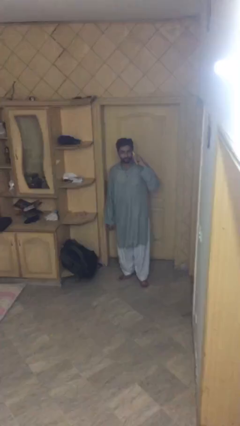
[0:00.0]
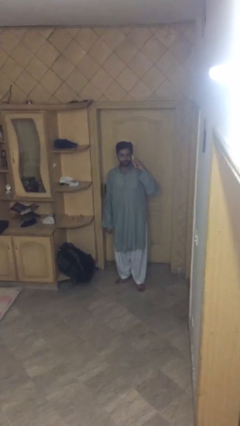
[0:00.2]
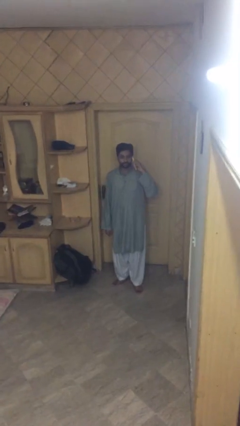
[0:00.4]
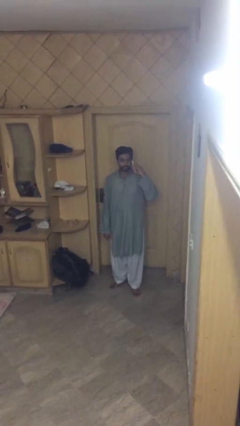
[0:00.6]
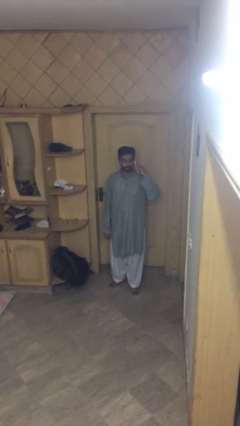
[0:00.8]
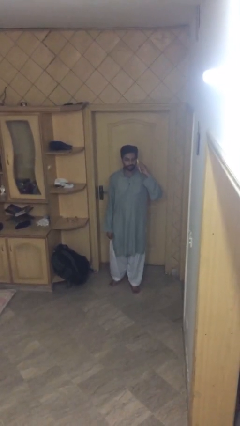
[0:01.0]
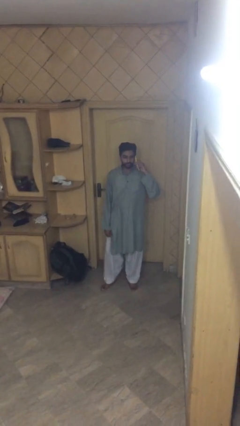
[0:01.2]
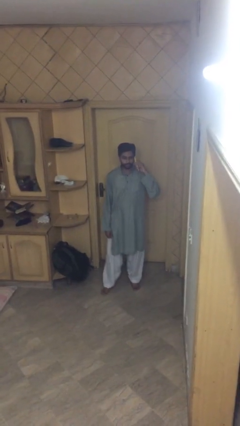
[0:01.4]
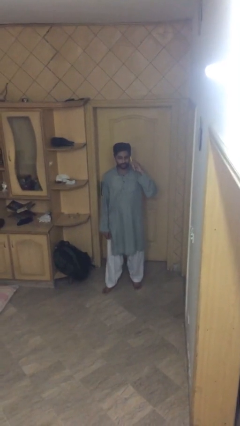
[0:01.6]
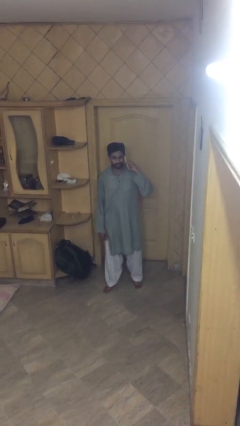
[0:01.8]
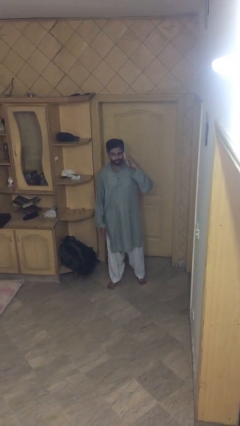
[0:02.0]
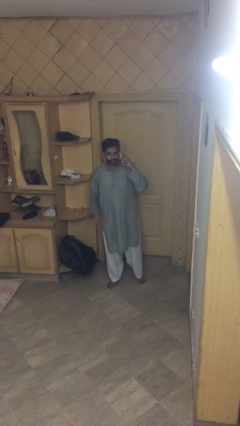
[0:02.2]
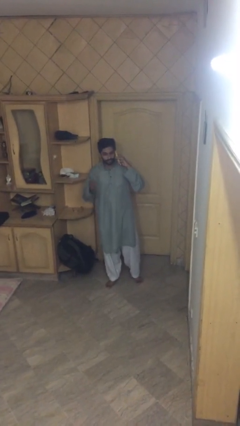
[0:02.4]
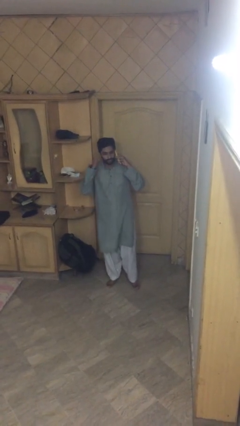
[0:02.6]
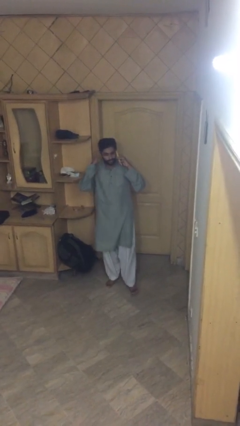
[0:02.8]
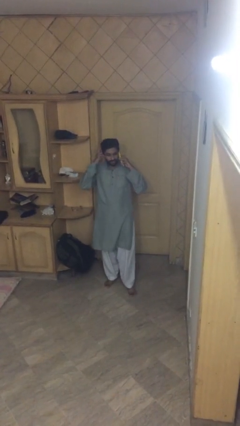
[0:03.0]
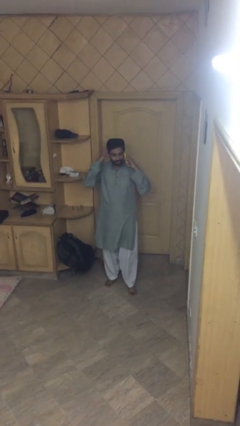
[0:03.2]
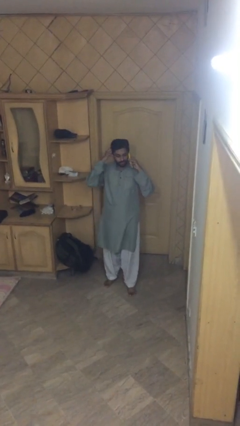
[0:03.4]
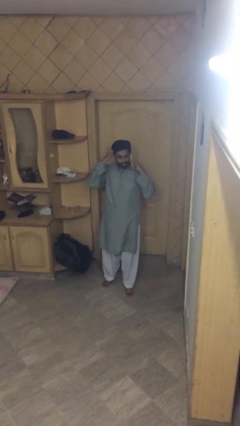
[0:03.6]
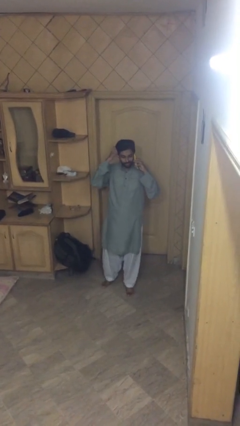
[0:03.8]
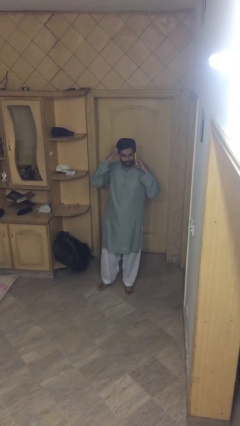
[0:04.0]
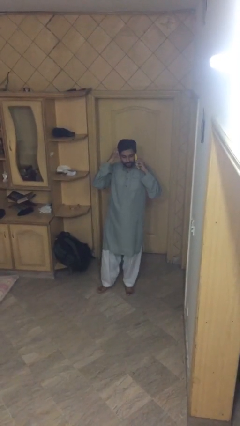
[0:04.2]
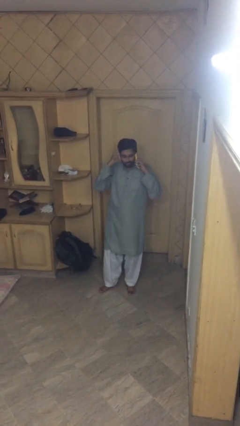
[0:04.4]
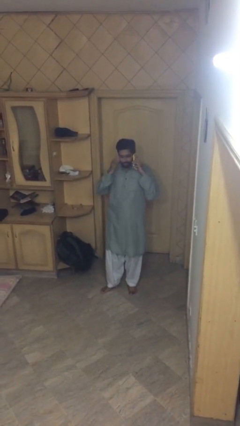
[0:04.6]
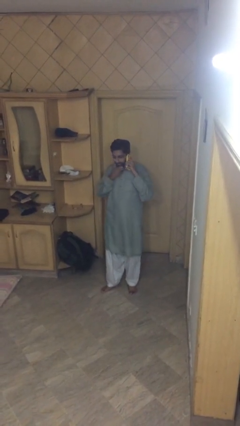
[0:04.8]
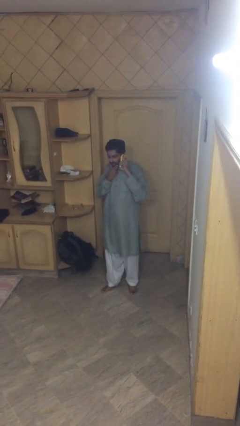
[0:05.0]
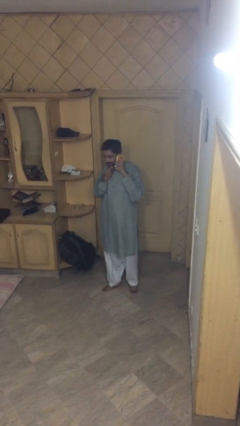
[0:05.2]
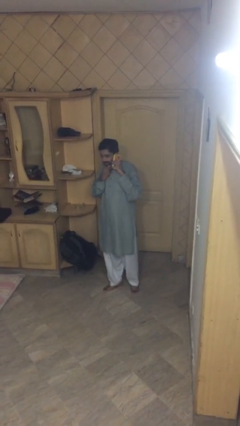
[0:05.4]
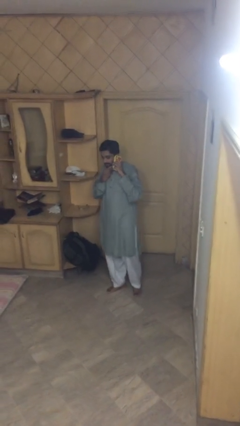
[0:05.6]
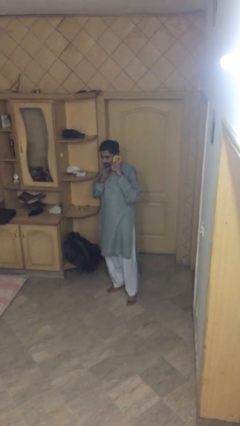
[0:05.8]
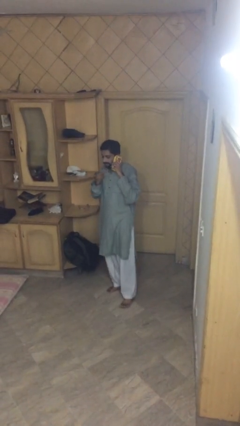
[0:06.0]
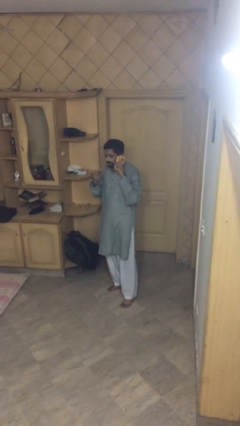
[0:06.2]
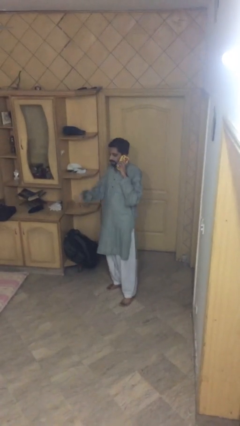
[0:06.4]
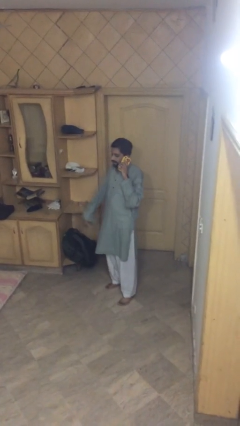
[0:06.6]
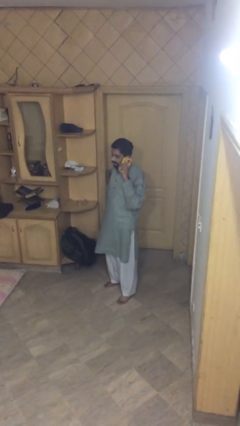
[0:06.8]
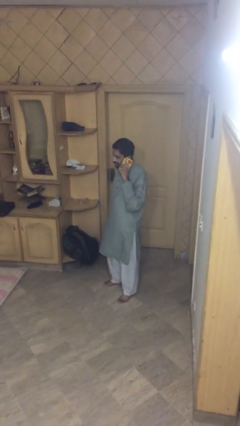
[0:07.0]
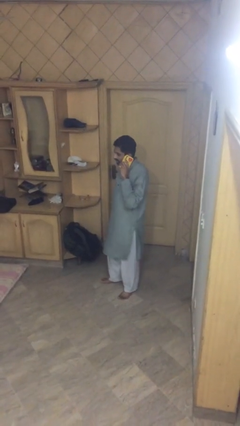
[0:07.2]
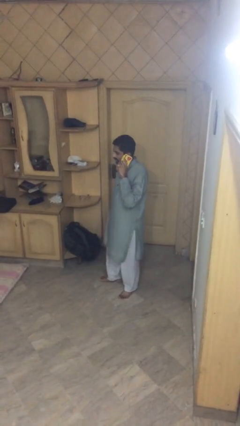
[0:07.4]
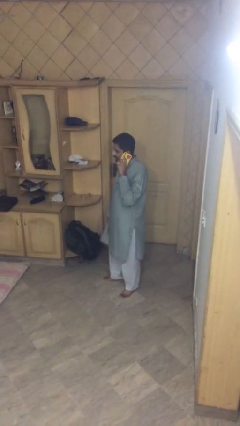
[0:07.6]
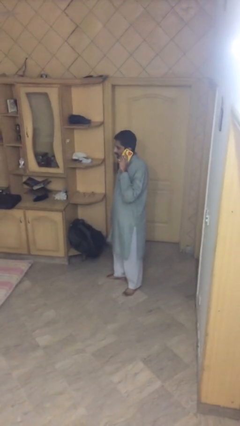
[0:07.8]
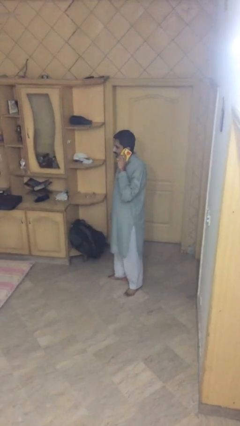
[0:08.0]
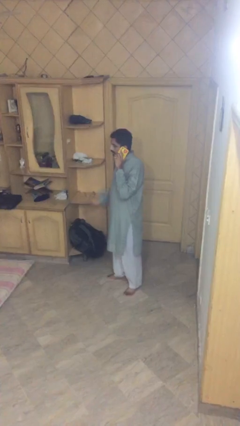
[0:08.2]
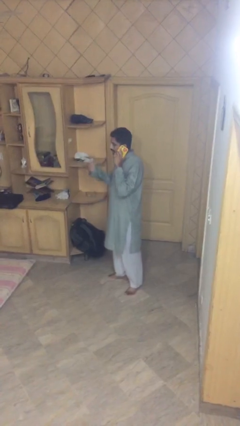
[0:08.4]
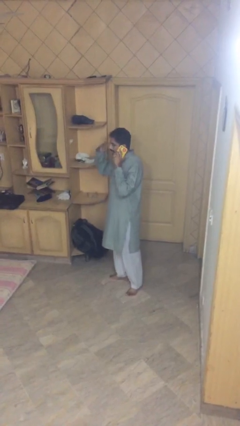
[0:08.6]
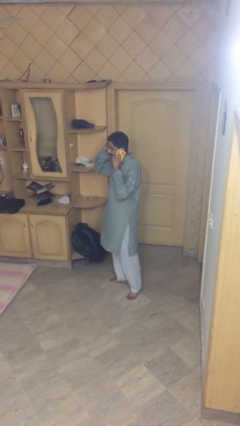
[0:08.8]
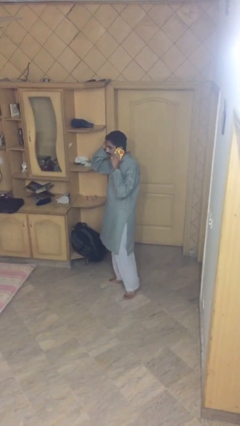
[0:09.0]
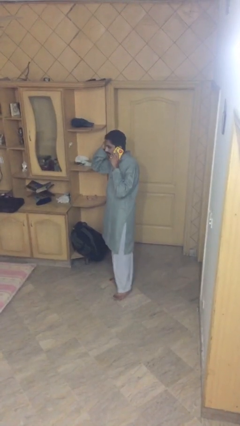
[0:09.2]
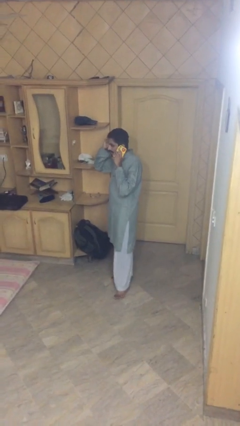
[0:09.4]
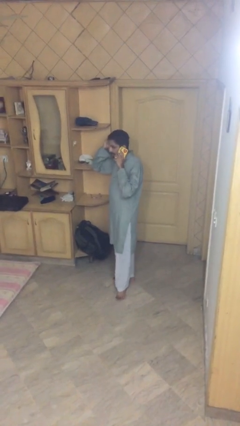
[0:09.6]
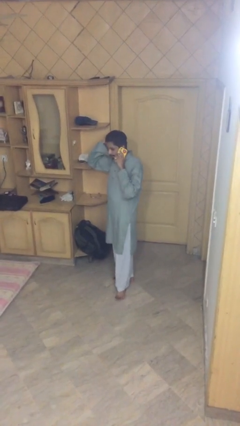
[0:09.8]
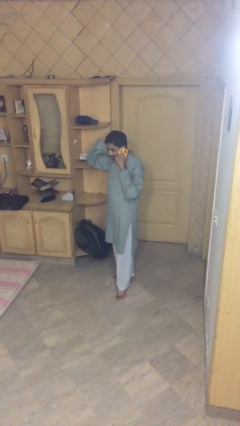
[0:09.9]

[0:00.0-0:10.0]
person talks on phone

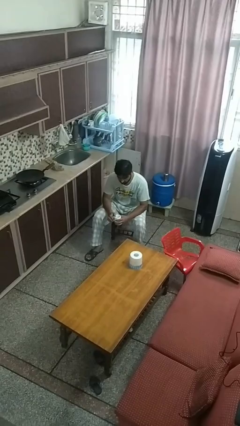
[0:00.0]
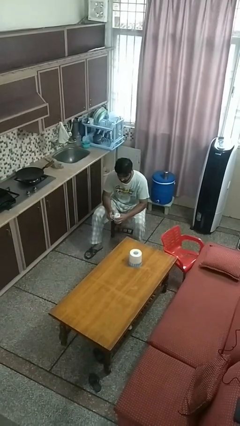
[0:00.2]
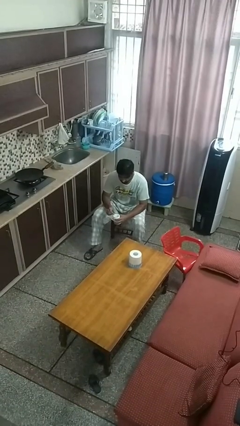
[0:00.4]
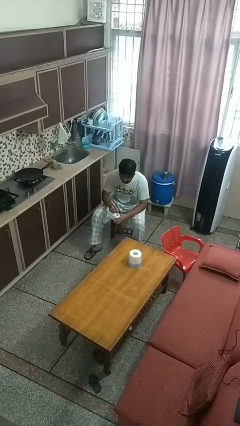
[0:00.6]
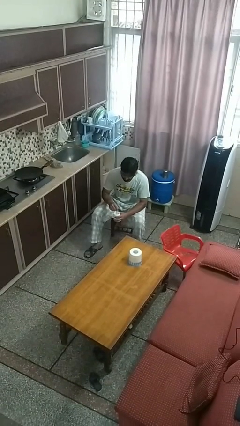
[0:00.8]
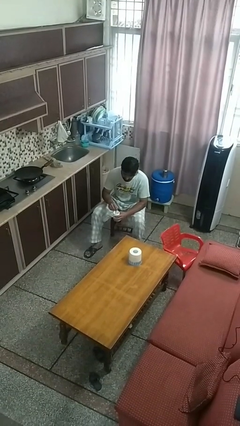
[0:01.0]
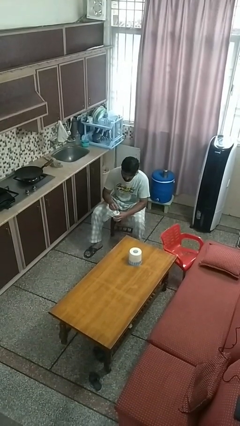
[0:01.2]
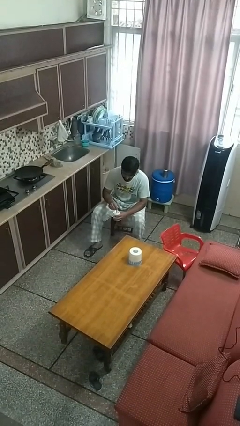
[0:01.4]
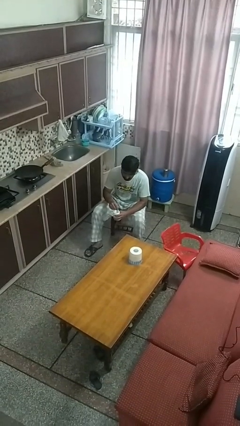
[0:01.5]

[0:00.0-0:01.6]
person stirs mug

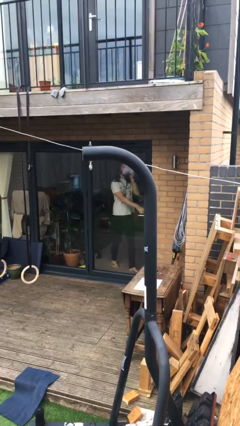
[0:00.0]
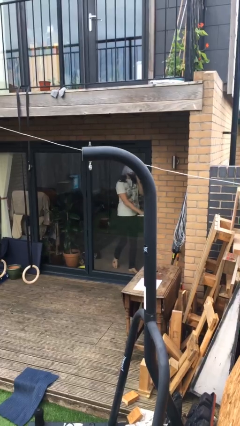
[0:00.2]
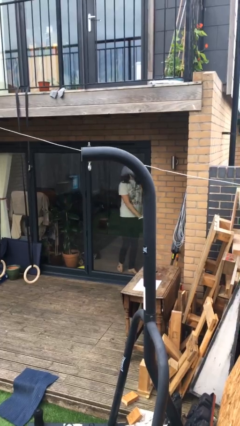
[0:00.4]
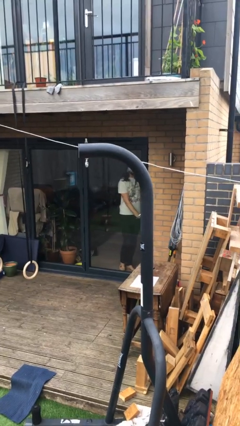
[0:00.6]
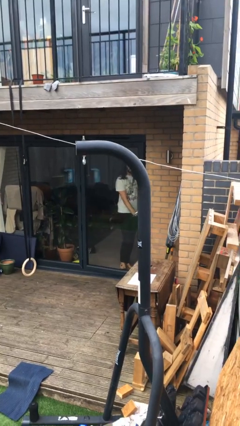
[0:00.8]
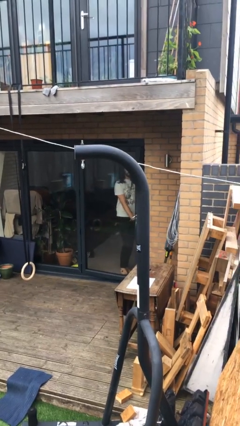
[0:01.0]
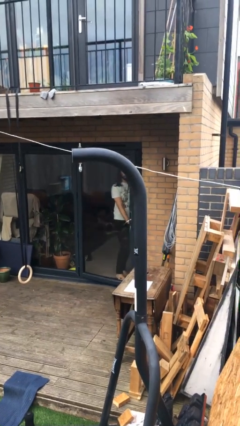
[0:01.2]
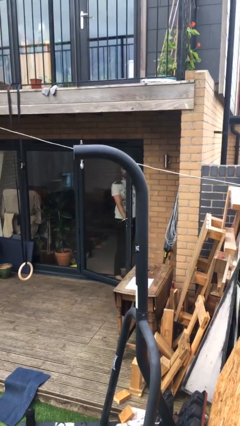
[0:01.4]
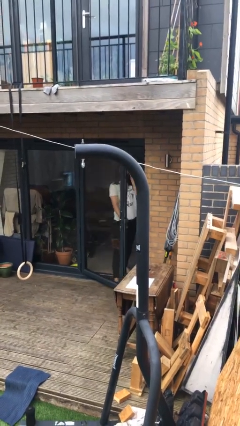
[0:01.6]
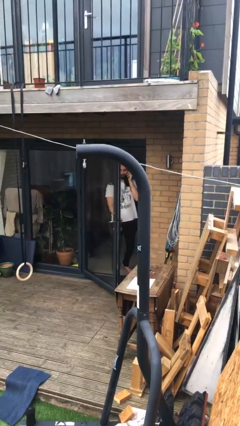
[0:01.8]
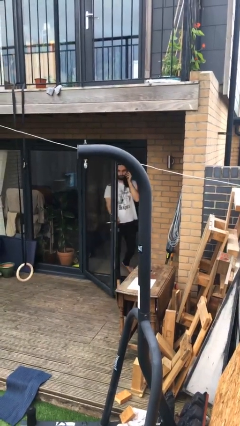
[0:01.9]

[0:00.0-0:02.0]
person opens facility door

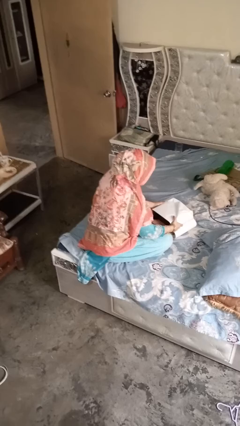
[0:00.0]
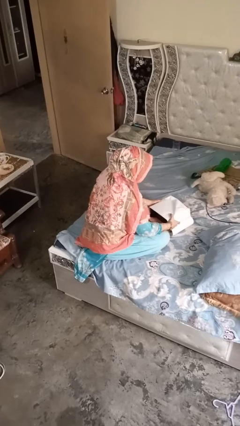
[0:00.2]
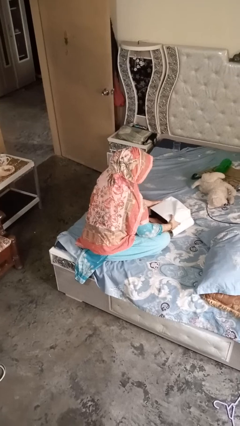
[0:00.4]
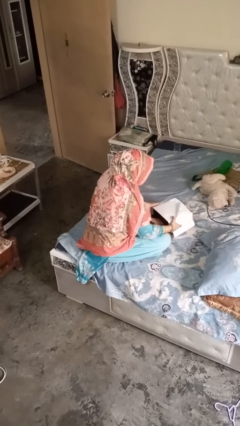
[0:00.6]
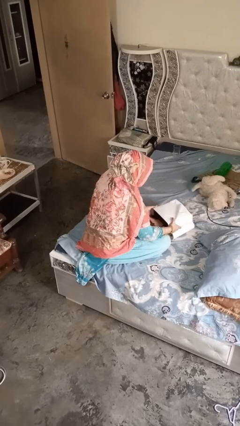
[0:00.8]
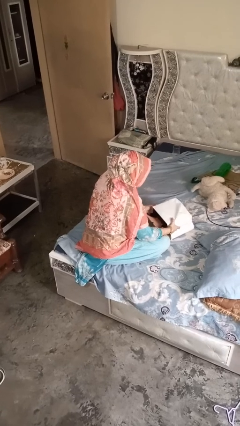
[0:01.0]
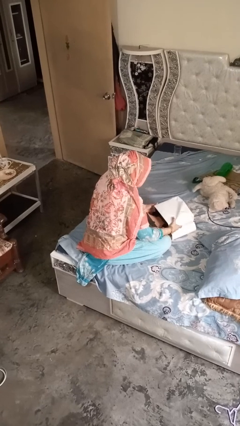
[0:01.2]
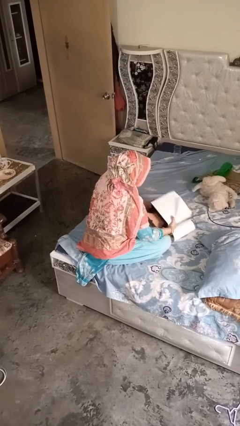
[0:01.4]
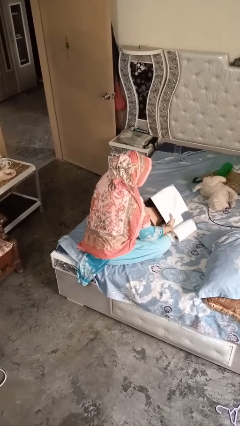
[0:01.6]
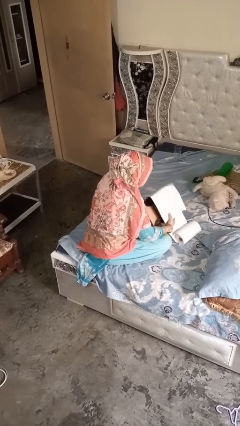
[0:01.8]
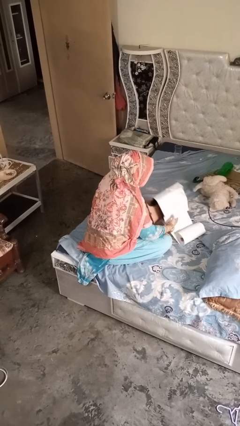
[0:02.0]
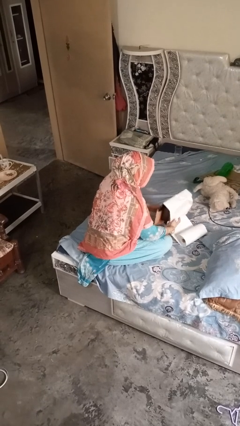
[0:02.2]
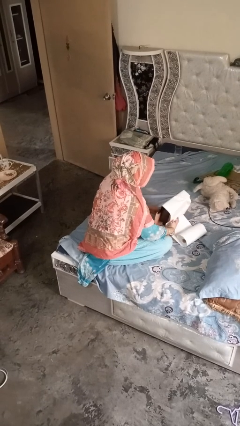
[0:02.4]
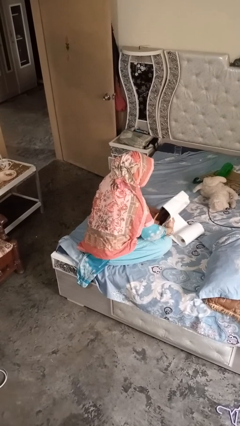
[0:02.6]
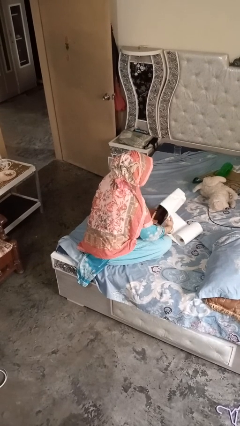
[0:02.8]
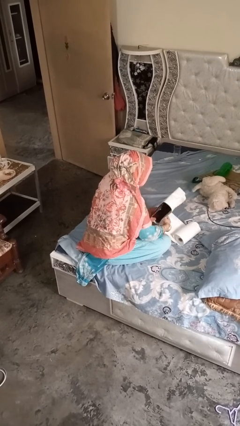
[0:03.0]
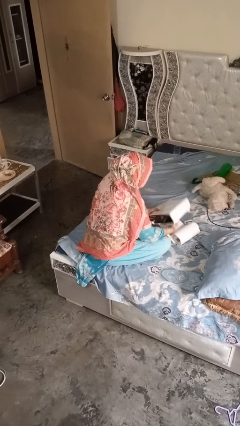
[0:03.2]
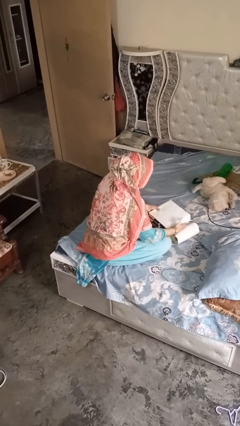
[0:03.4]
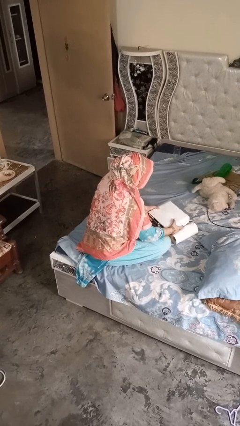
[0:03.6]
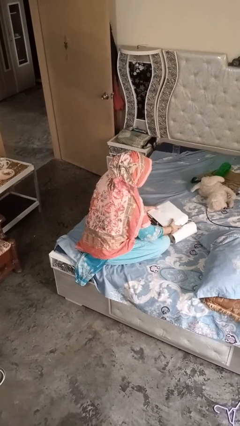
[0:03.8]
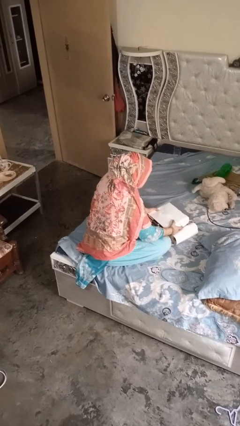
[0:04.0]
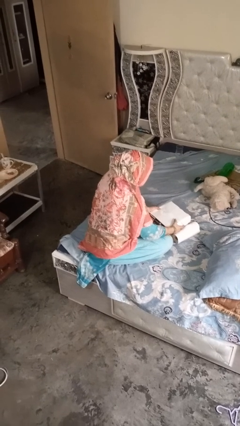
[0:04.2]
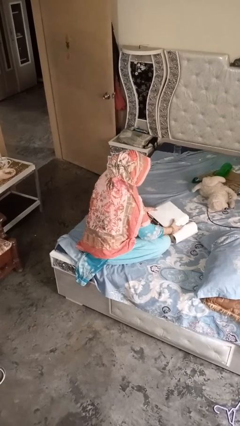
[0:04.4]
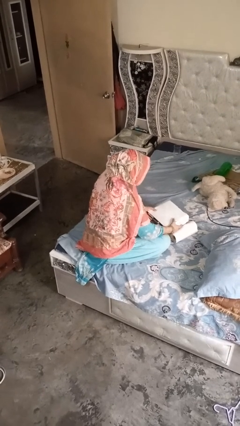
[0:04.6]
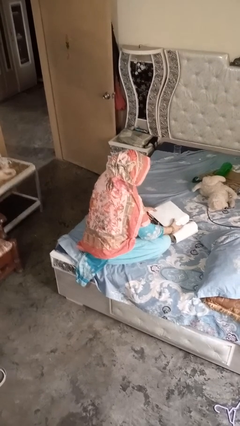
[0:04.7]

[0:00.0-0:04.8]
person wraps box
